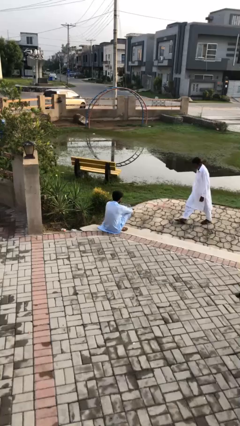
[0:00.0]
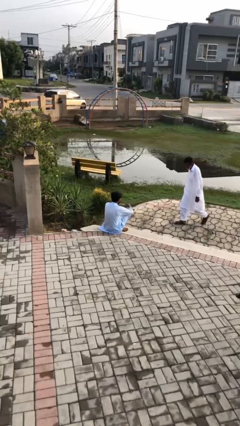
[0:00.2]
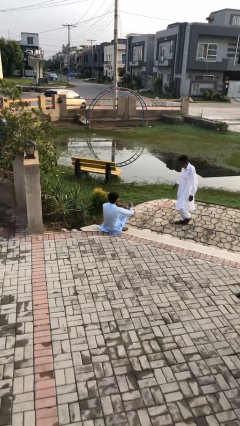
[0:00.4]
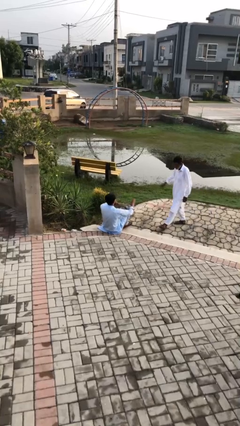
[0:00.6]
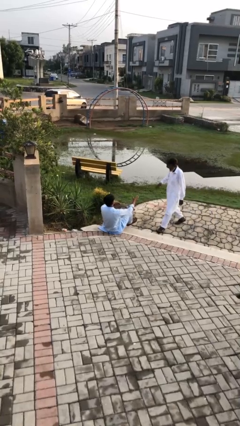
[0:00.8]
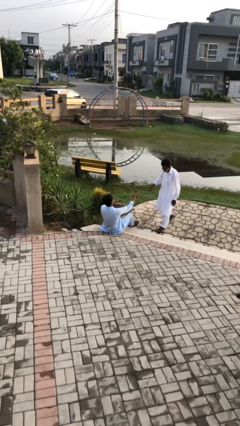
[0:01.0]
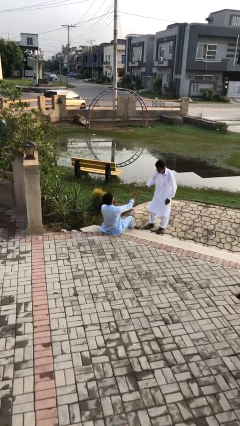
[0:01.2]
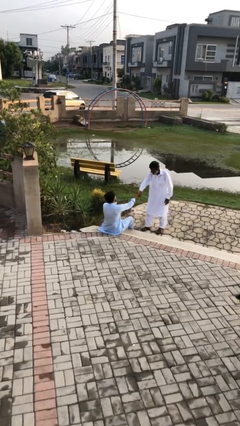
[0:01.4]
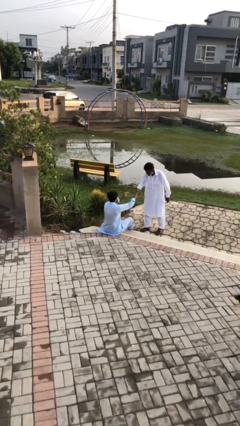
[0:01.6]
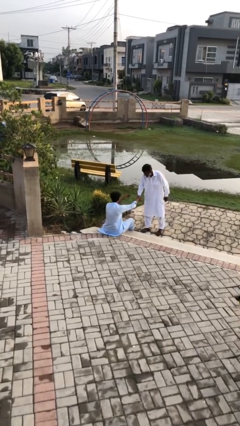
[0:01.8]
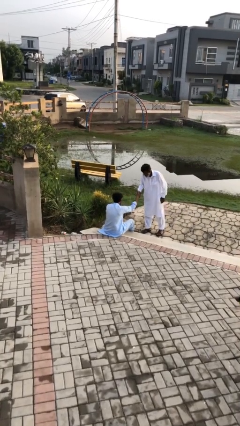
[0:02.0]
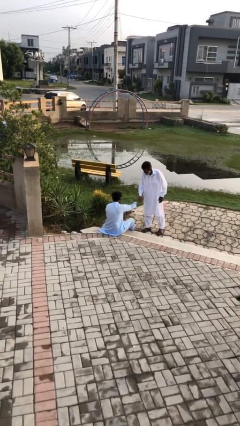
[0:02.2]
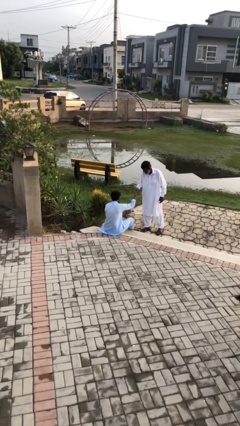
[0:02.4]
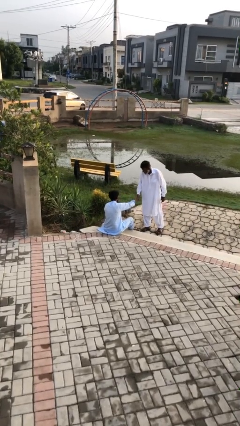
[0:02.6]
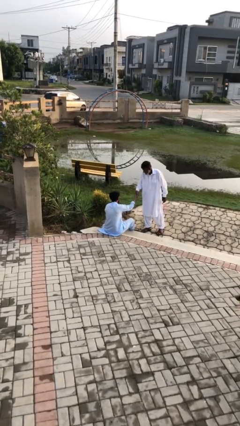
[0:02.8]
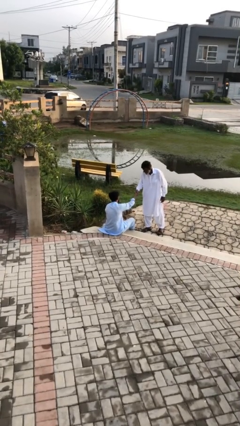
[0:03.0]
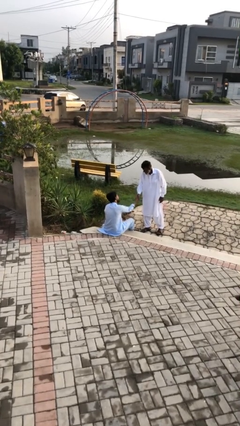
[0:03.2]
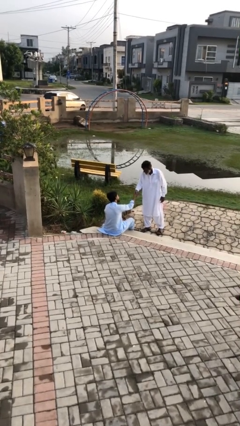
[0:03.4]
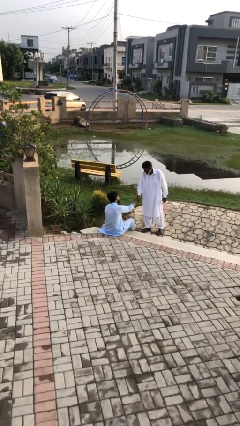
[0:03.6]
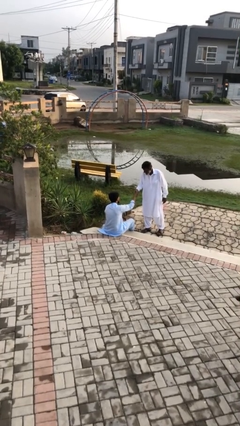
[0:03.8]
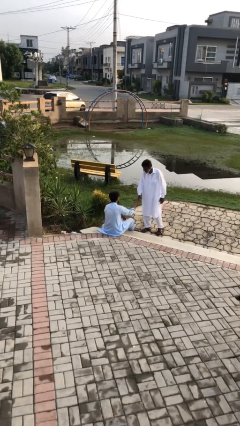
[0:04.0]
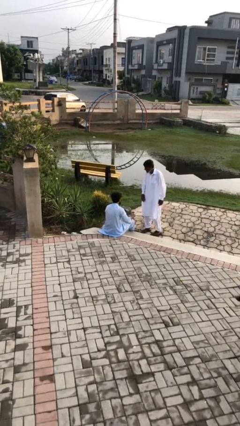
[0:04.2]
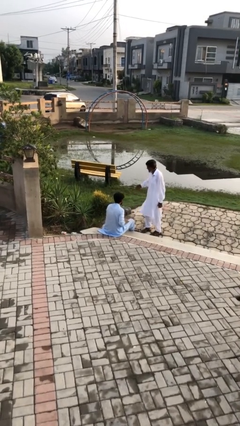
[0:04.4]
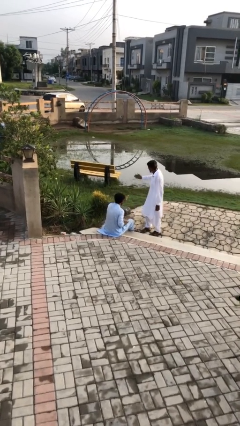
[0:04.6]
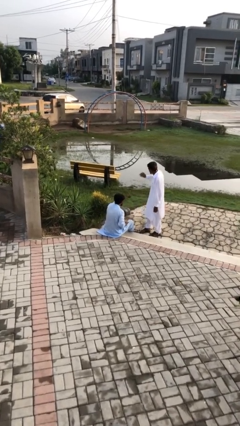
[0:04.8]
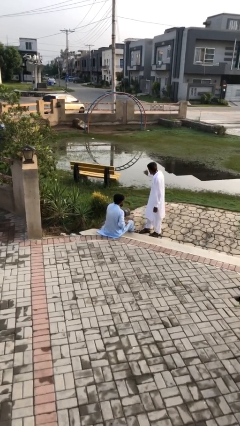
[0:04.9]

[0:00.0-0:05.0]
person shakes hand

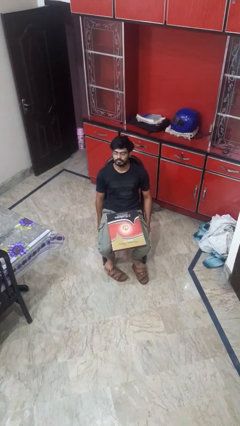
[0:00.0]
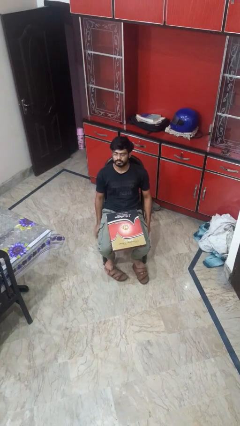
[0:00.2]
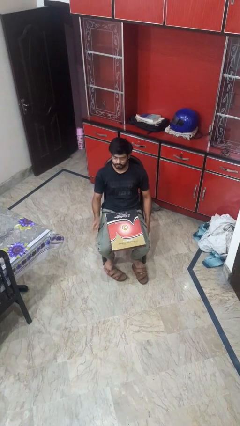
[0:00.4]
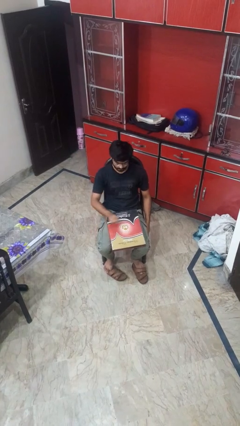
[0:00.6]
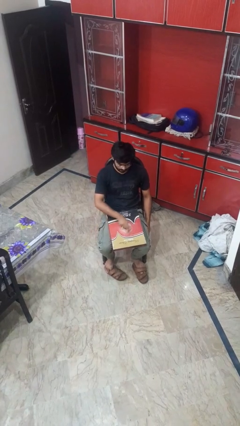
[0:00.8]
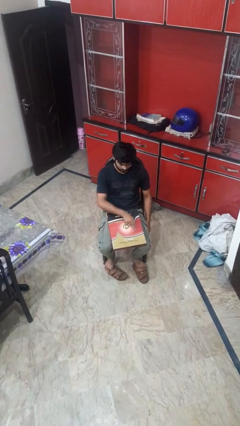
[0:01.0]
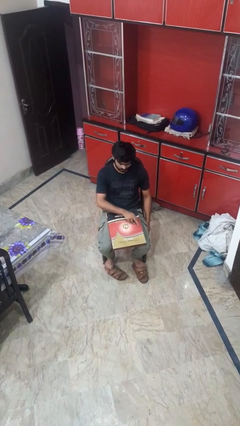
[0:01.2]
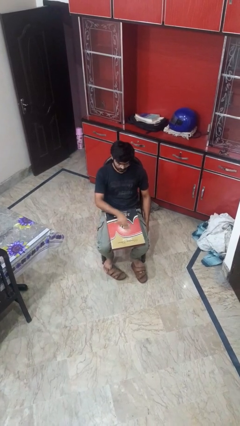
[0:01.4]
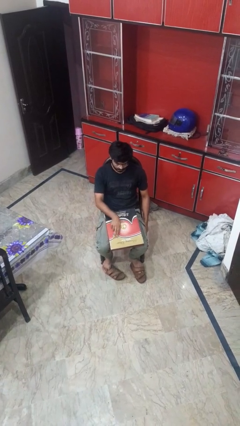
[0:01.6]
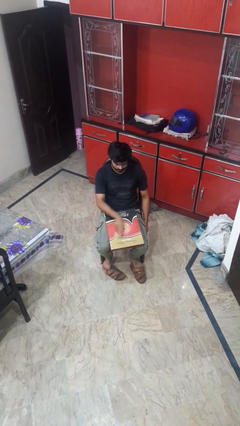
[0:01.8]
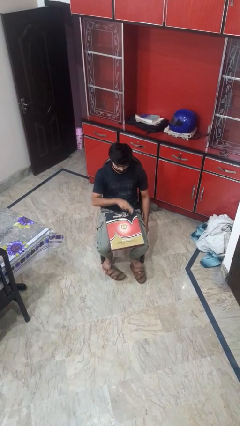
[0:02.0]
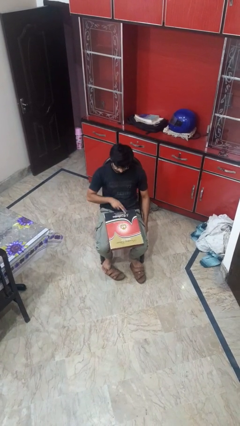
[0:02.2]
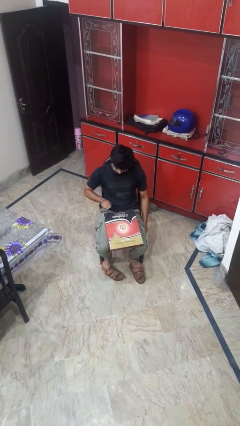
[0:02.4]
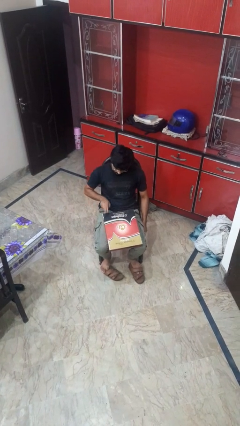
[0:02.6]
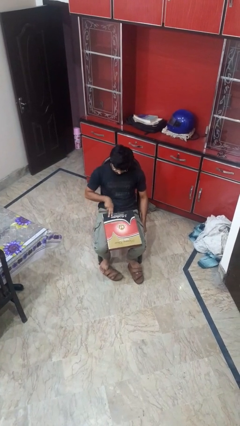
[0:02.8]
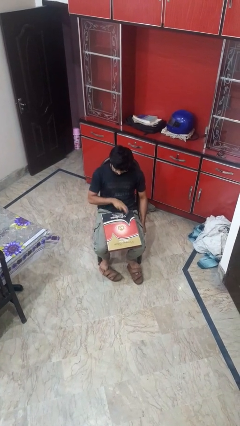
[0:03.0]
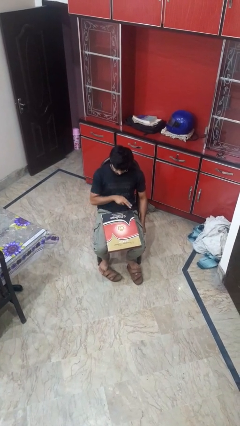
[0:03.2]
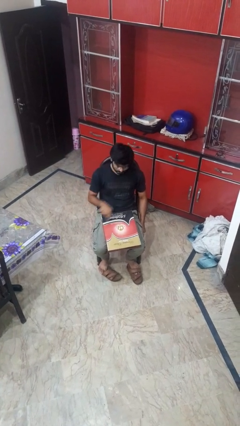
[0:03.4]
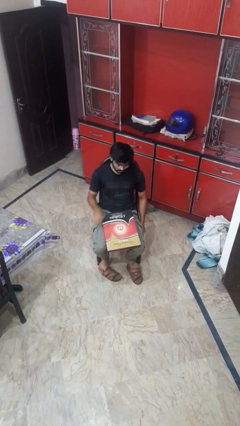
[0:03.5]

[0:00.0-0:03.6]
person taps object with finger

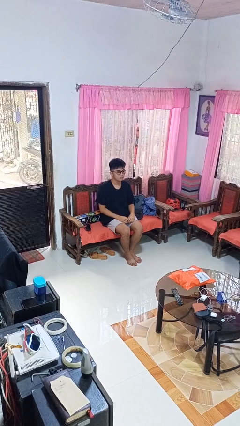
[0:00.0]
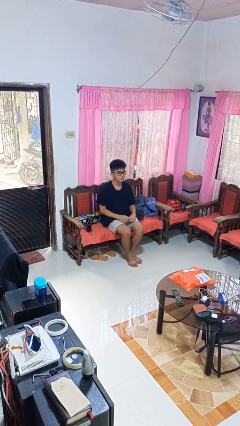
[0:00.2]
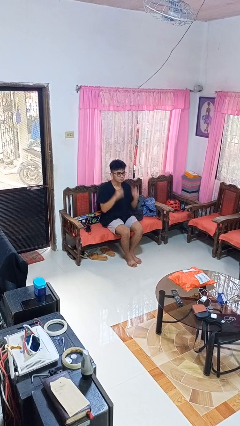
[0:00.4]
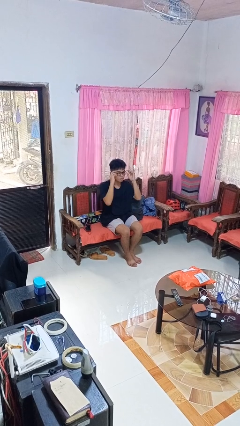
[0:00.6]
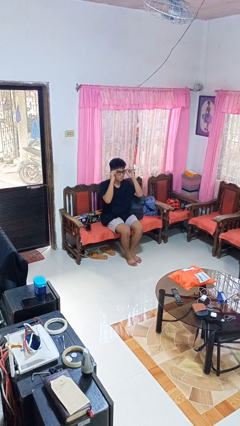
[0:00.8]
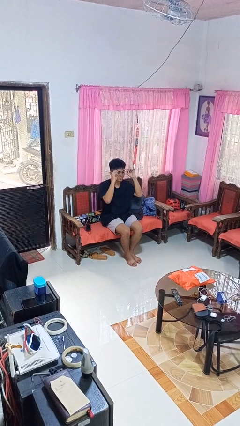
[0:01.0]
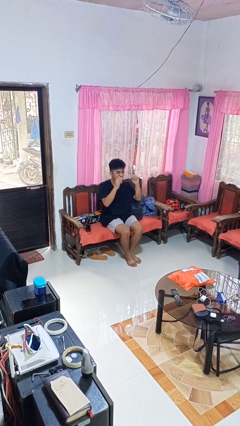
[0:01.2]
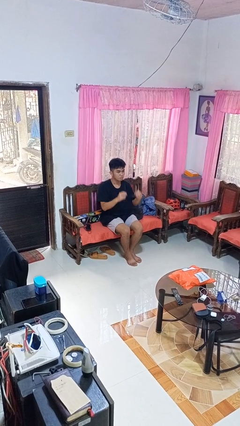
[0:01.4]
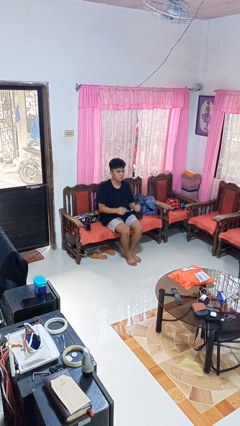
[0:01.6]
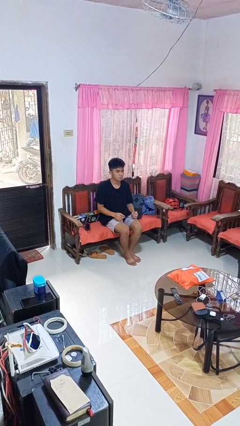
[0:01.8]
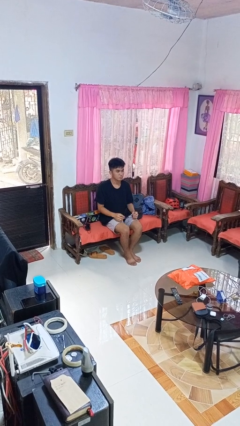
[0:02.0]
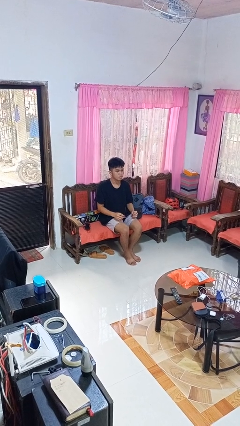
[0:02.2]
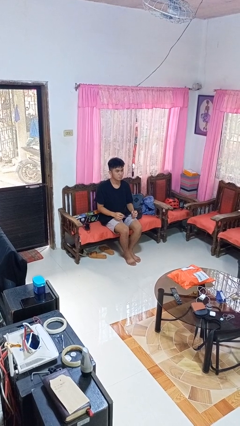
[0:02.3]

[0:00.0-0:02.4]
person takes off glasses

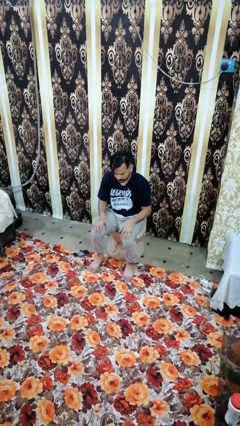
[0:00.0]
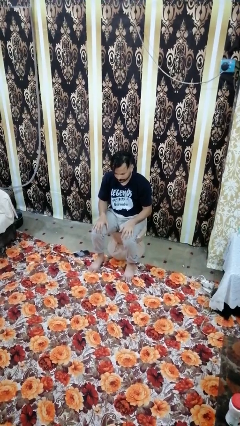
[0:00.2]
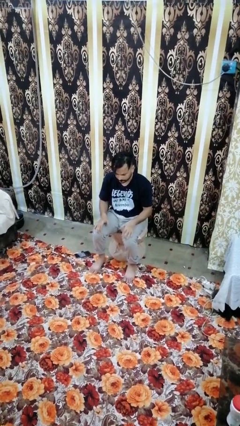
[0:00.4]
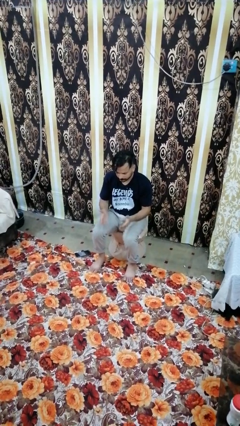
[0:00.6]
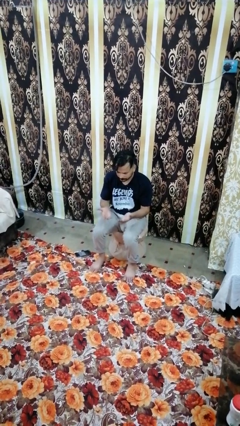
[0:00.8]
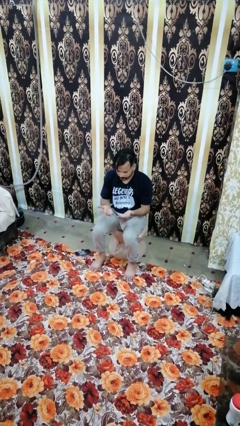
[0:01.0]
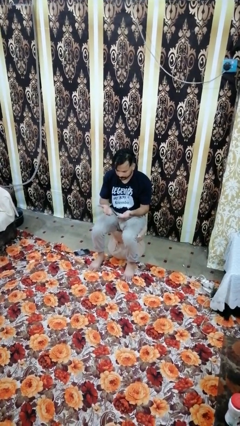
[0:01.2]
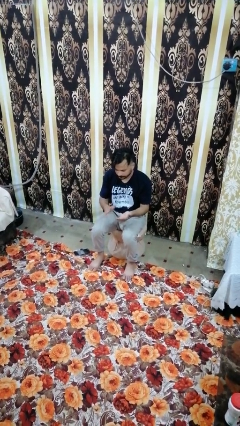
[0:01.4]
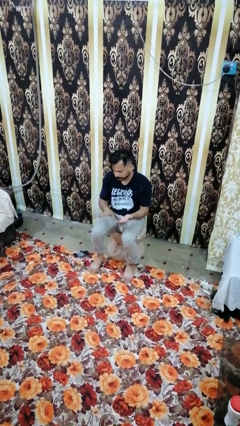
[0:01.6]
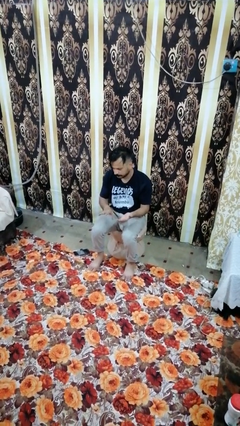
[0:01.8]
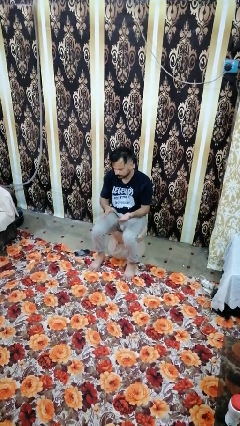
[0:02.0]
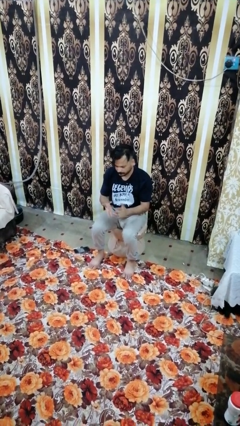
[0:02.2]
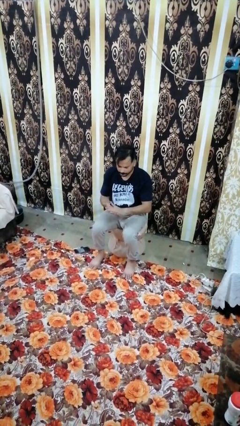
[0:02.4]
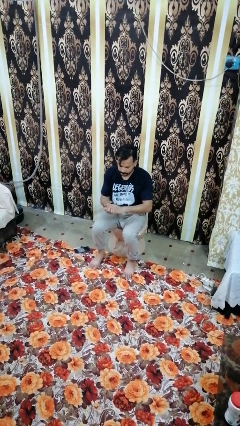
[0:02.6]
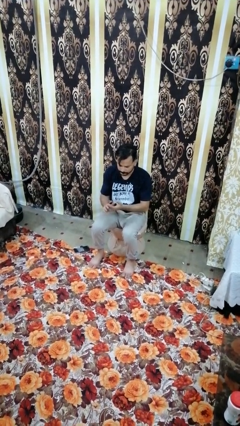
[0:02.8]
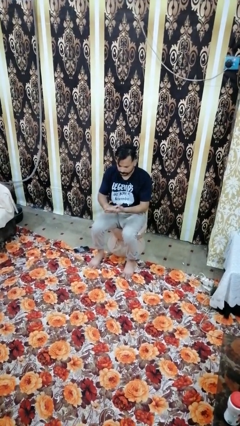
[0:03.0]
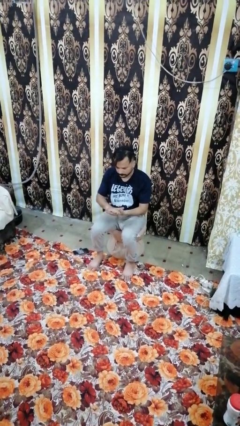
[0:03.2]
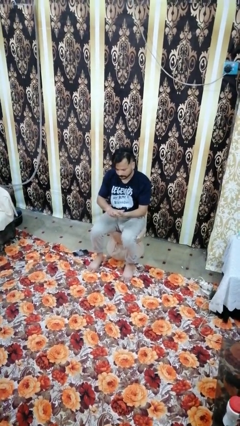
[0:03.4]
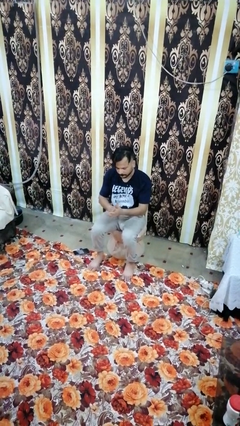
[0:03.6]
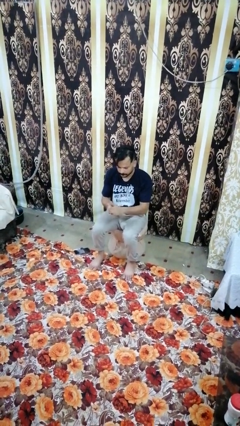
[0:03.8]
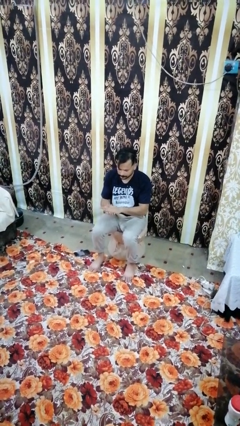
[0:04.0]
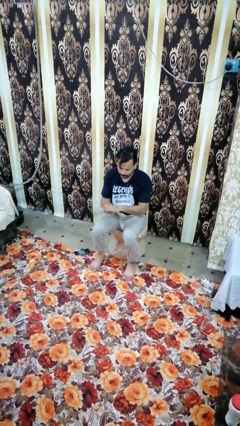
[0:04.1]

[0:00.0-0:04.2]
person looks at hands in lap

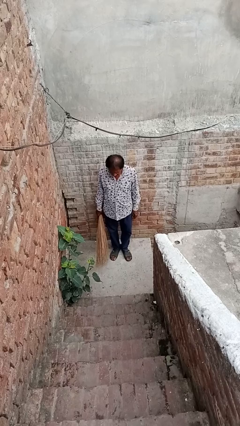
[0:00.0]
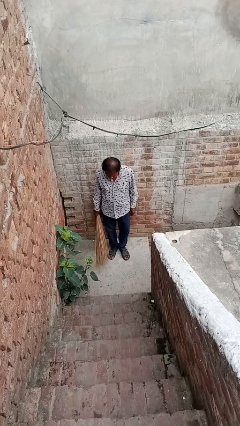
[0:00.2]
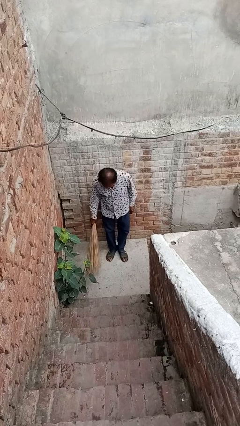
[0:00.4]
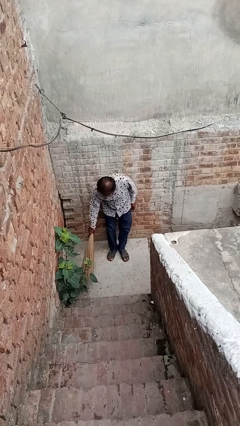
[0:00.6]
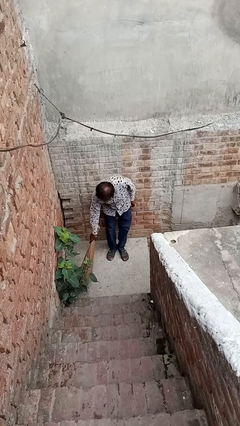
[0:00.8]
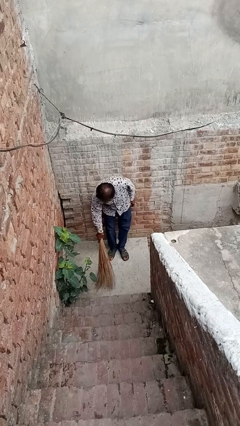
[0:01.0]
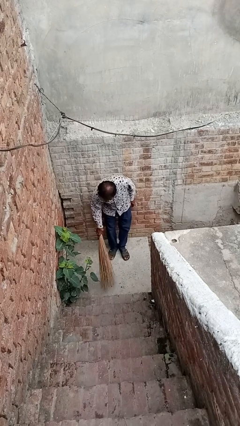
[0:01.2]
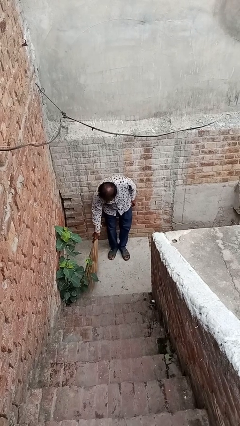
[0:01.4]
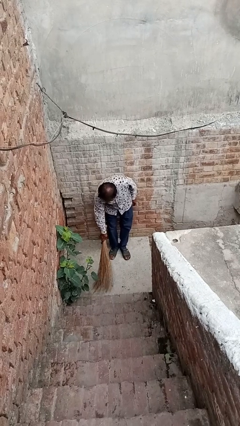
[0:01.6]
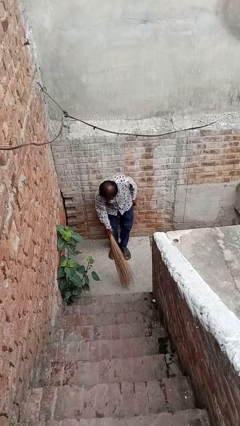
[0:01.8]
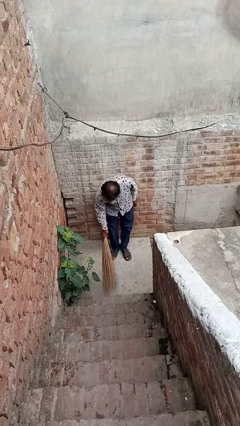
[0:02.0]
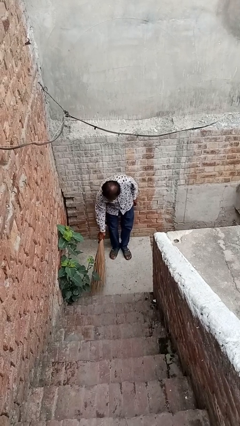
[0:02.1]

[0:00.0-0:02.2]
person sweeps floor

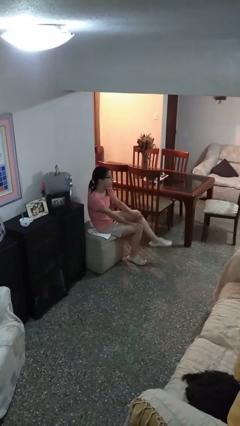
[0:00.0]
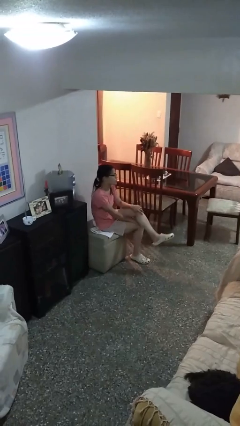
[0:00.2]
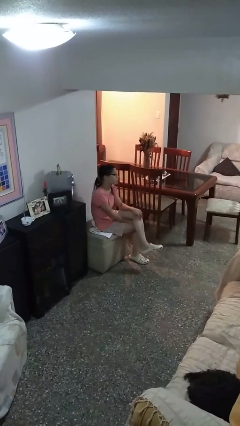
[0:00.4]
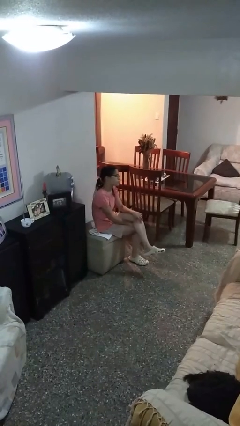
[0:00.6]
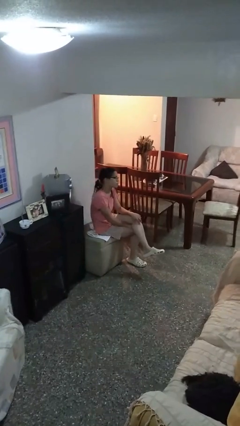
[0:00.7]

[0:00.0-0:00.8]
person strokes chin
